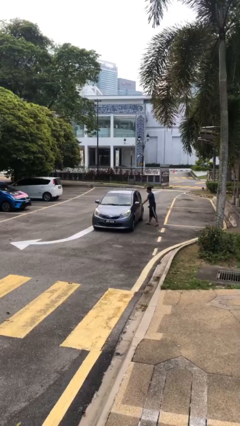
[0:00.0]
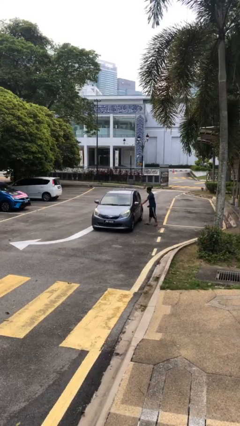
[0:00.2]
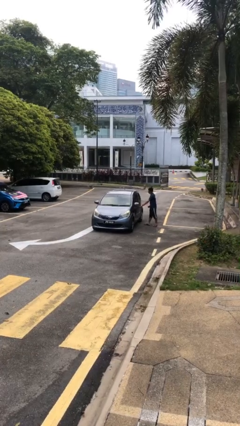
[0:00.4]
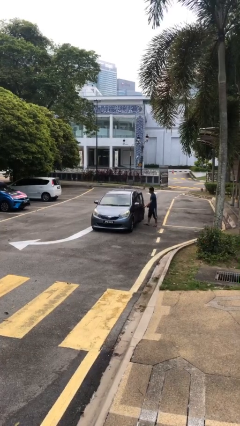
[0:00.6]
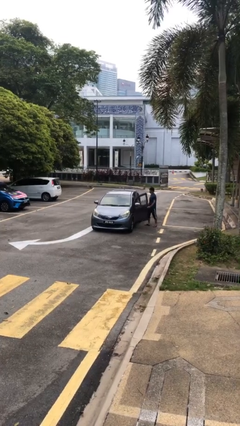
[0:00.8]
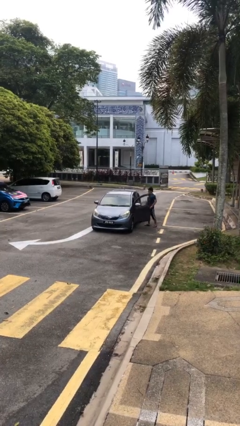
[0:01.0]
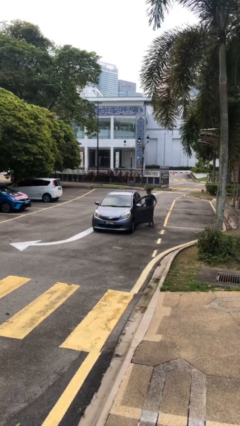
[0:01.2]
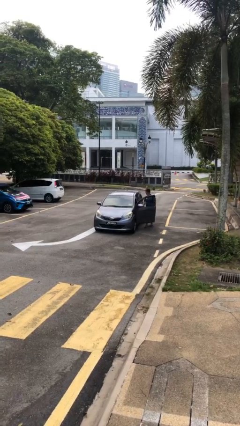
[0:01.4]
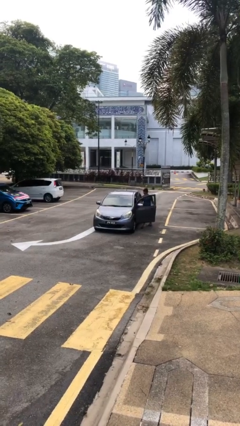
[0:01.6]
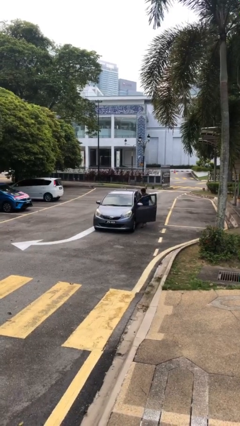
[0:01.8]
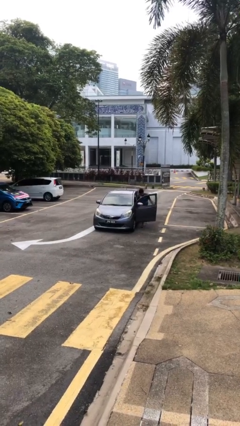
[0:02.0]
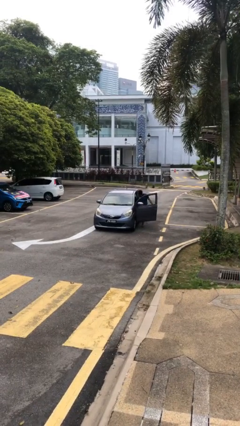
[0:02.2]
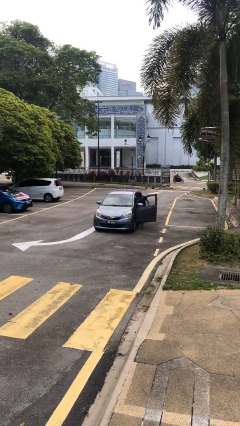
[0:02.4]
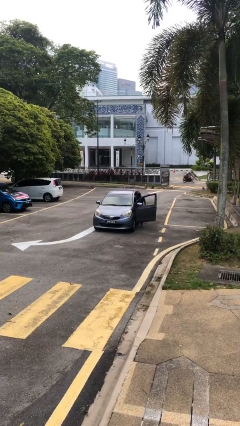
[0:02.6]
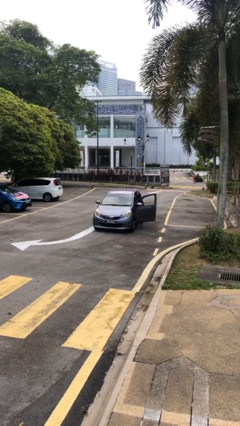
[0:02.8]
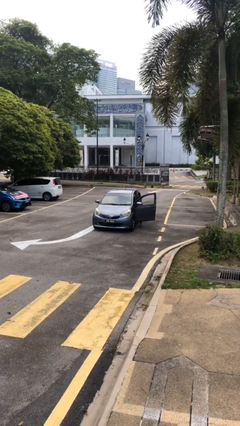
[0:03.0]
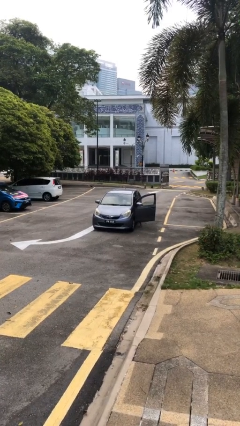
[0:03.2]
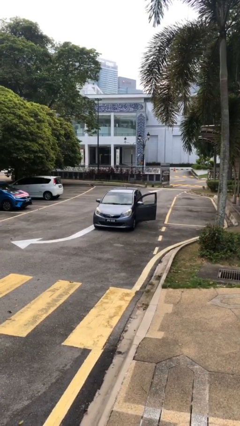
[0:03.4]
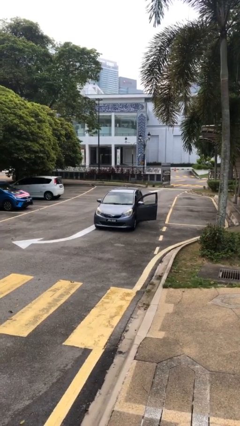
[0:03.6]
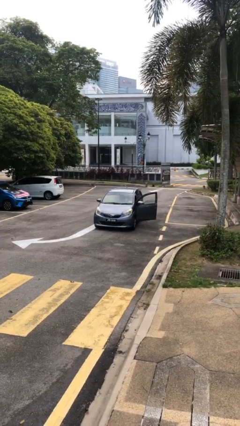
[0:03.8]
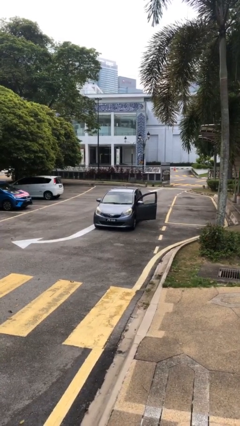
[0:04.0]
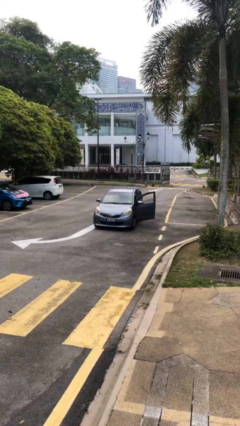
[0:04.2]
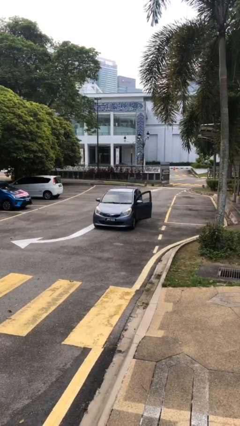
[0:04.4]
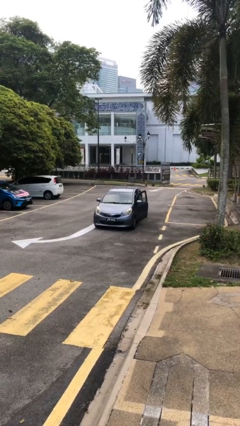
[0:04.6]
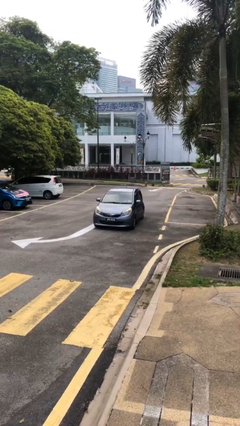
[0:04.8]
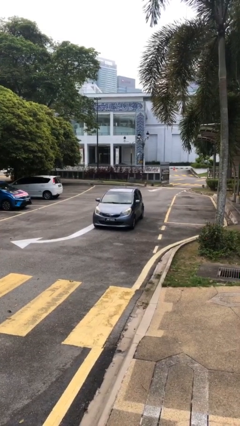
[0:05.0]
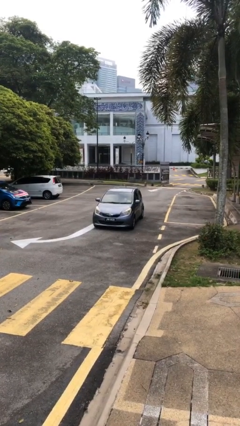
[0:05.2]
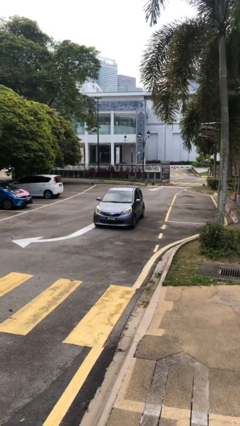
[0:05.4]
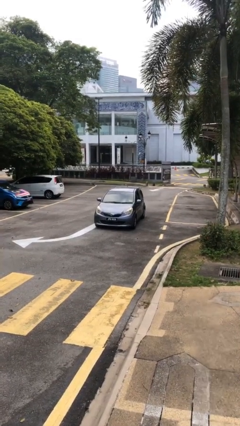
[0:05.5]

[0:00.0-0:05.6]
car picks up person

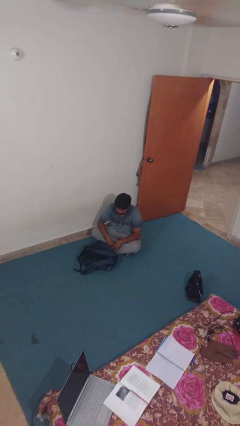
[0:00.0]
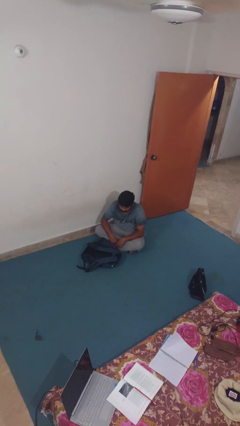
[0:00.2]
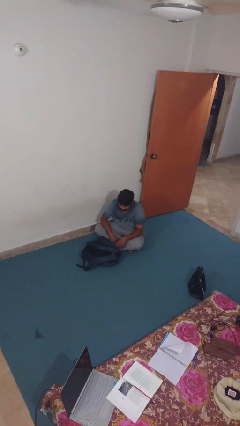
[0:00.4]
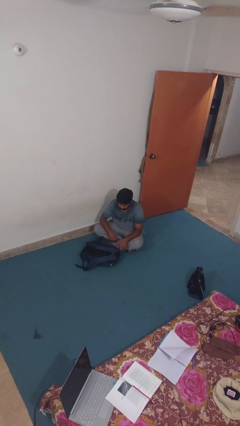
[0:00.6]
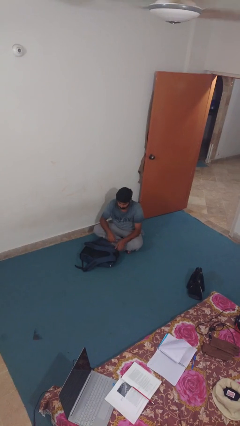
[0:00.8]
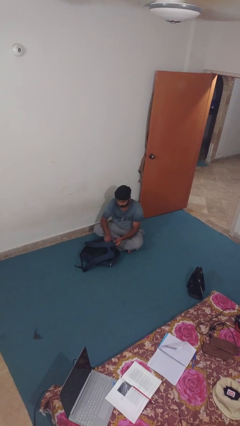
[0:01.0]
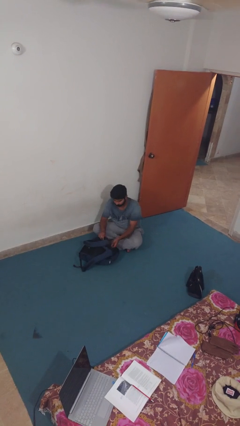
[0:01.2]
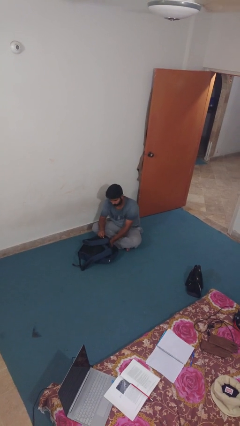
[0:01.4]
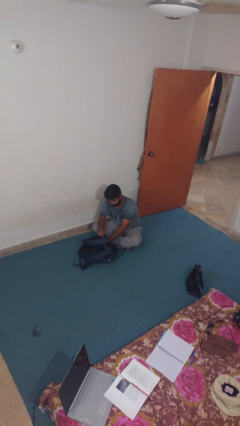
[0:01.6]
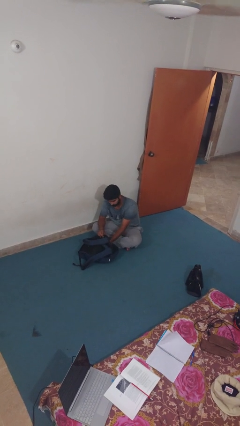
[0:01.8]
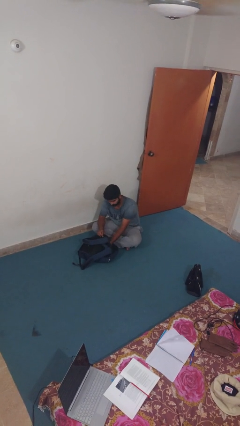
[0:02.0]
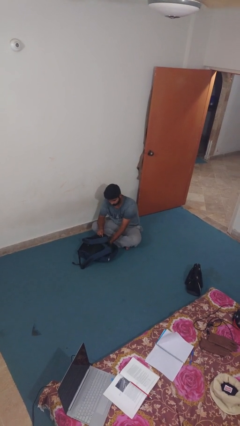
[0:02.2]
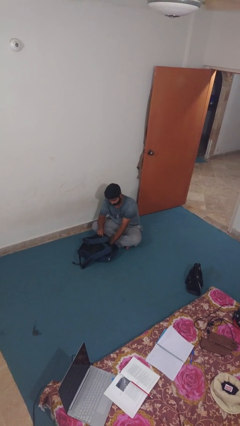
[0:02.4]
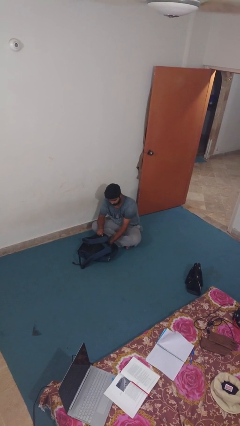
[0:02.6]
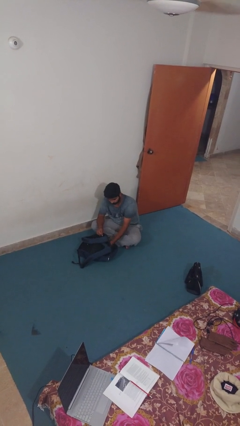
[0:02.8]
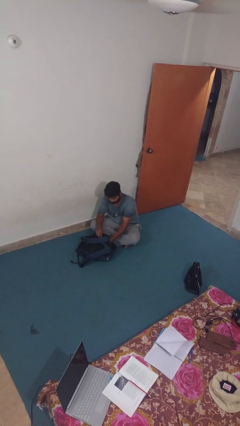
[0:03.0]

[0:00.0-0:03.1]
person searches in backpack

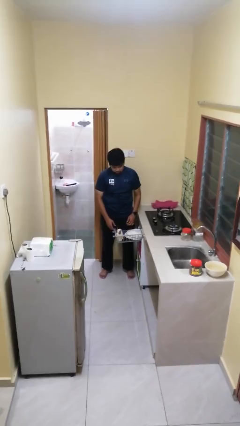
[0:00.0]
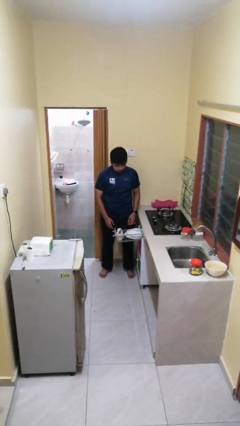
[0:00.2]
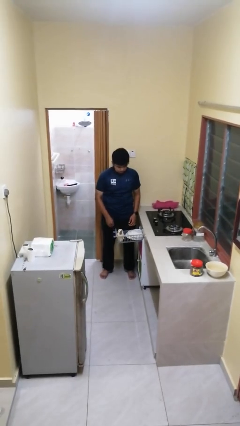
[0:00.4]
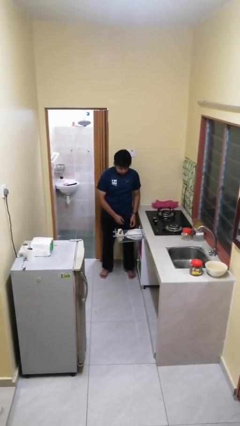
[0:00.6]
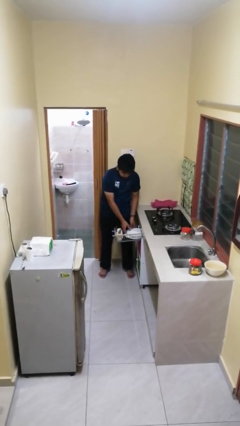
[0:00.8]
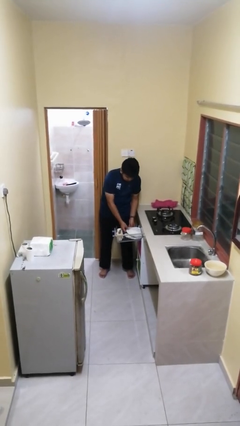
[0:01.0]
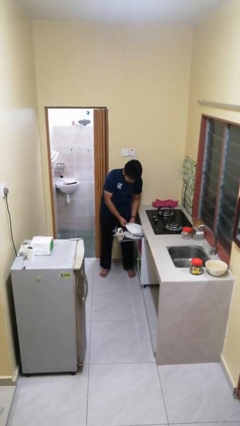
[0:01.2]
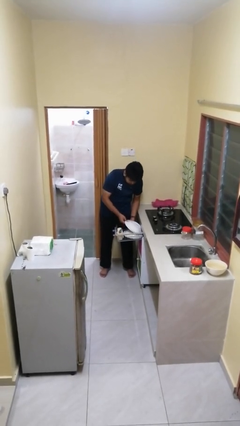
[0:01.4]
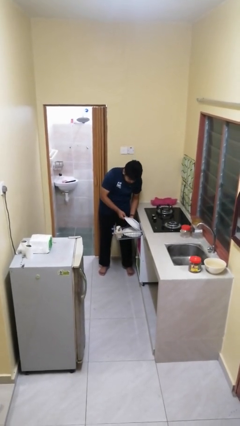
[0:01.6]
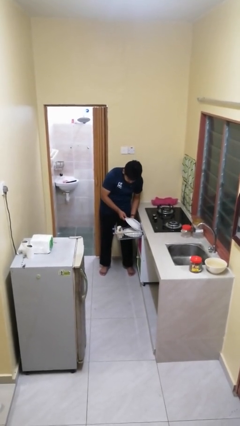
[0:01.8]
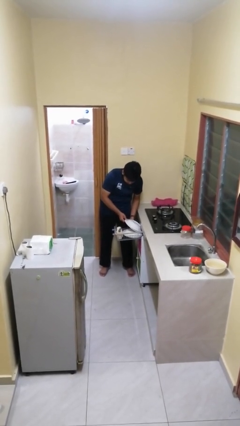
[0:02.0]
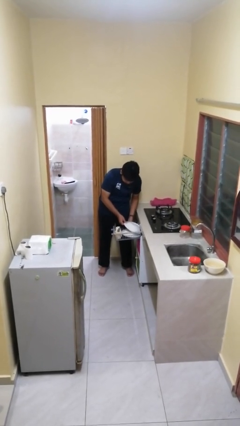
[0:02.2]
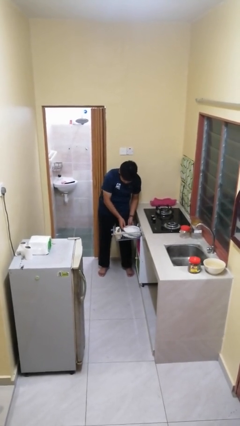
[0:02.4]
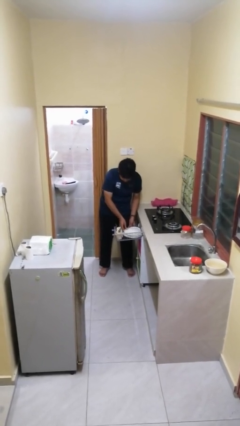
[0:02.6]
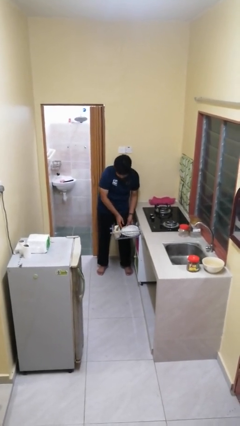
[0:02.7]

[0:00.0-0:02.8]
person searches in kitchen drawer

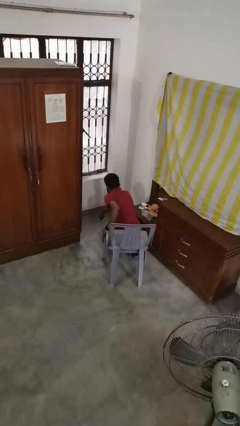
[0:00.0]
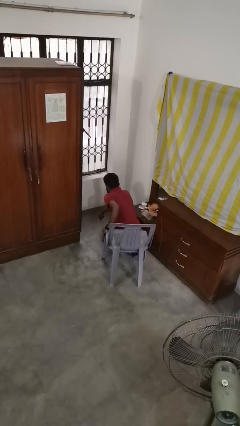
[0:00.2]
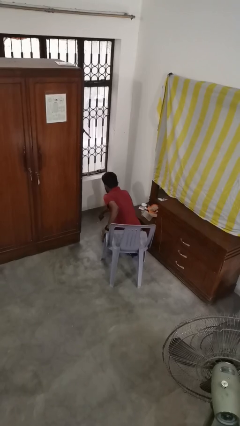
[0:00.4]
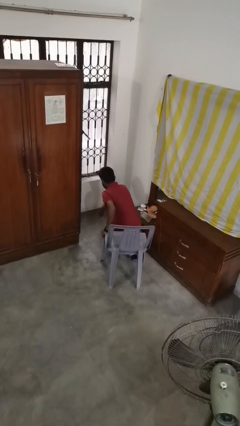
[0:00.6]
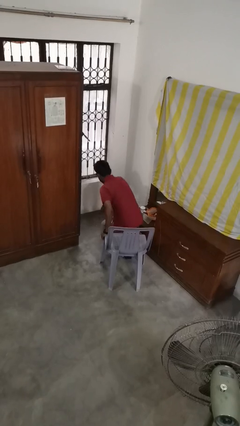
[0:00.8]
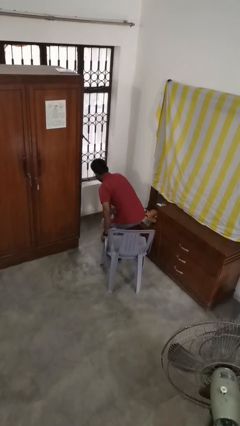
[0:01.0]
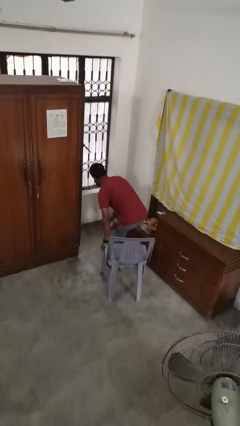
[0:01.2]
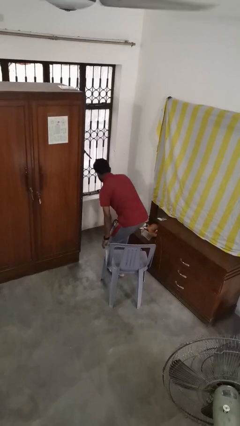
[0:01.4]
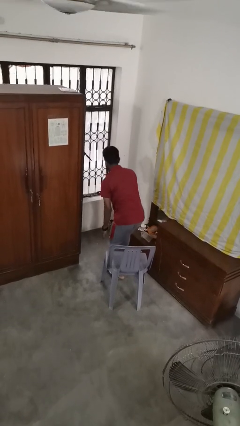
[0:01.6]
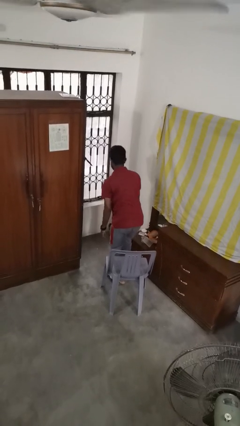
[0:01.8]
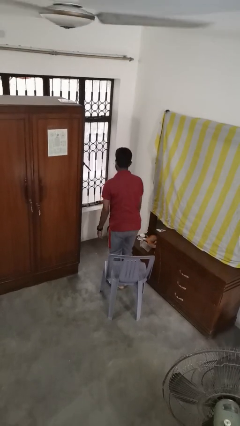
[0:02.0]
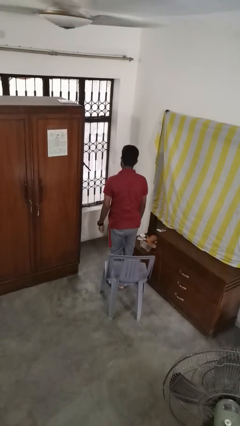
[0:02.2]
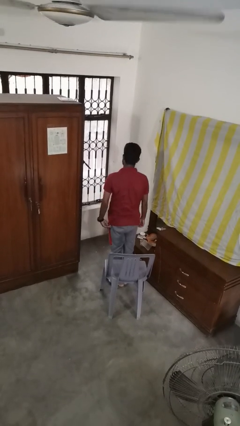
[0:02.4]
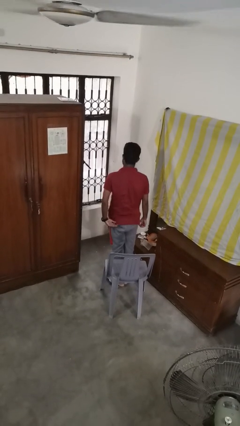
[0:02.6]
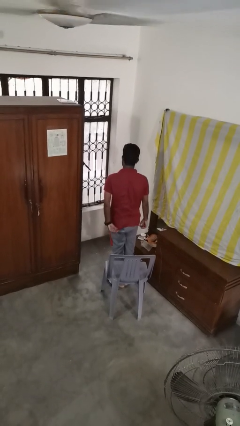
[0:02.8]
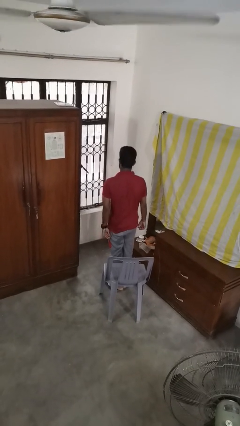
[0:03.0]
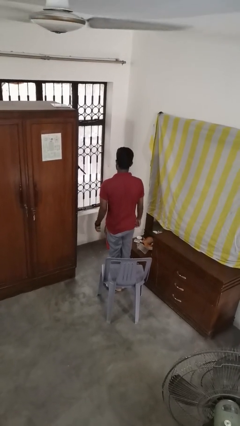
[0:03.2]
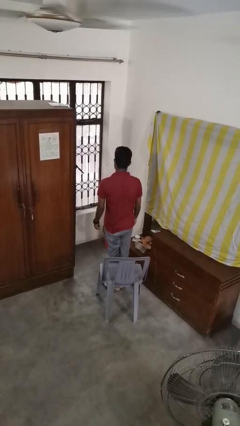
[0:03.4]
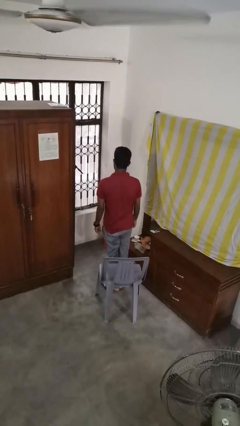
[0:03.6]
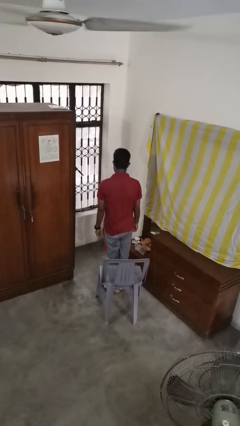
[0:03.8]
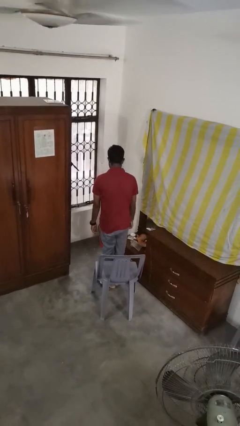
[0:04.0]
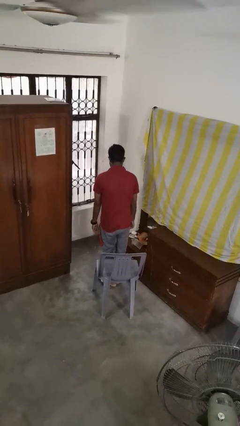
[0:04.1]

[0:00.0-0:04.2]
person stands up from floor

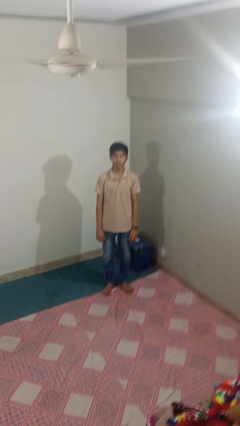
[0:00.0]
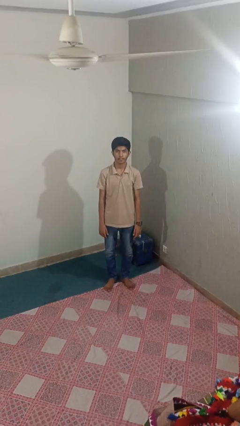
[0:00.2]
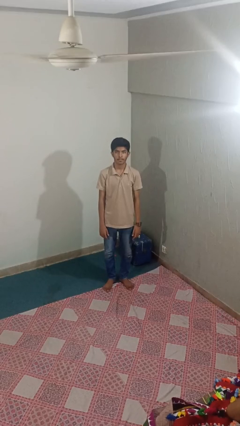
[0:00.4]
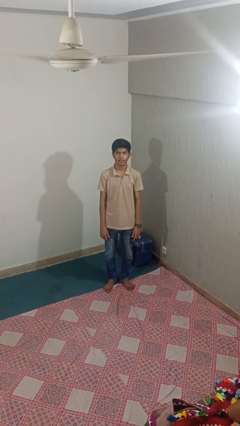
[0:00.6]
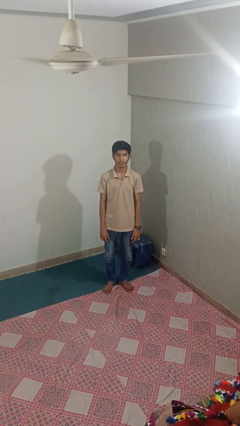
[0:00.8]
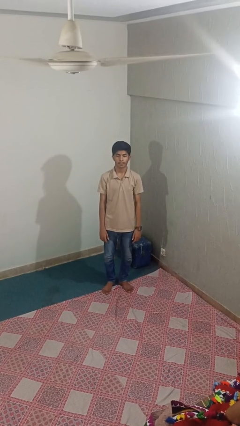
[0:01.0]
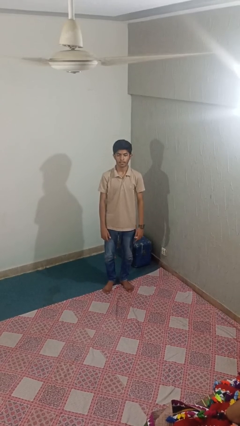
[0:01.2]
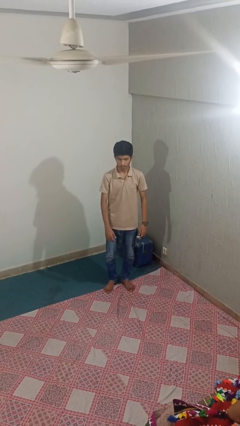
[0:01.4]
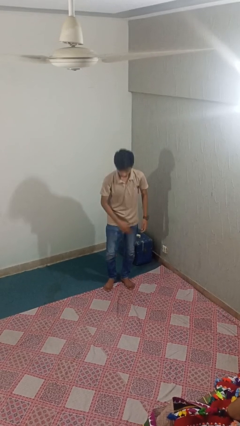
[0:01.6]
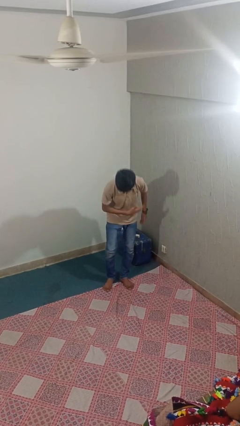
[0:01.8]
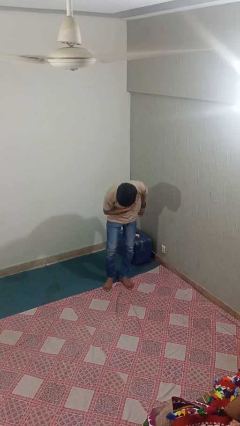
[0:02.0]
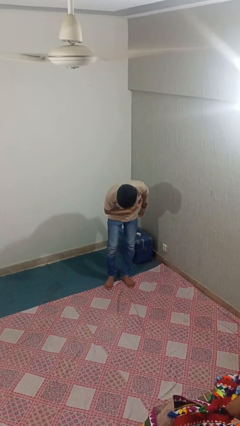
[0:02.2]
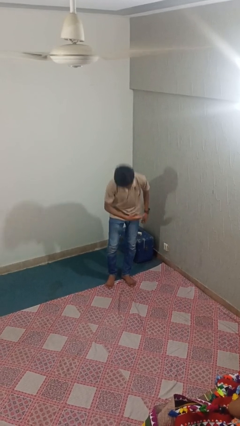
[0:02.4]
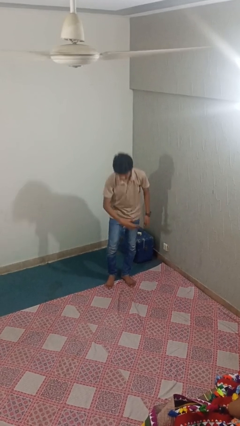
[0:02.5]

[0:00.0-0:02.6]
person bows
